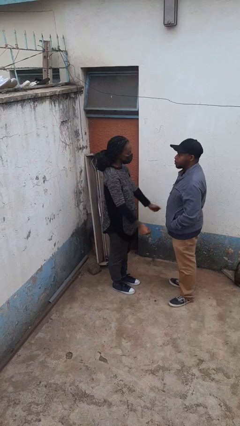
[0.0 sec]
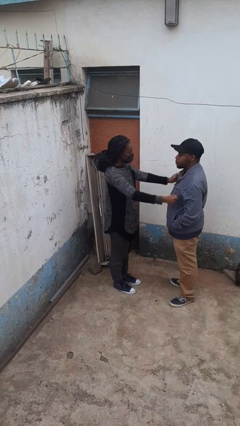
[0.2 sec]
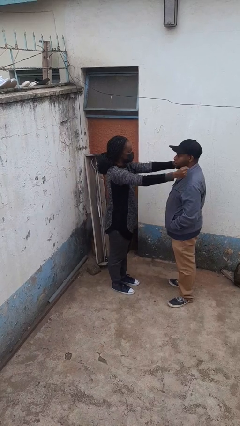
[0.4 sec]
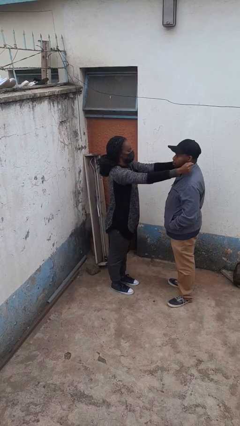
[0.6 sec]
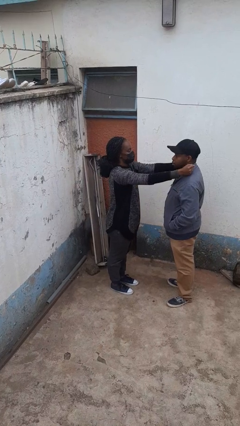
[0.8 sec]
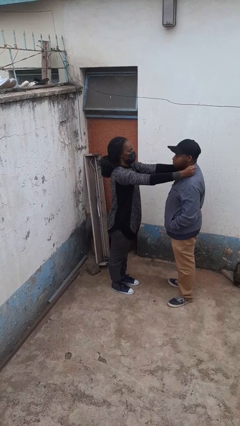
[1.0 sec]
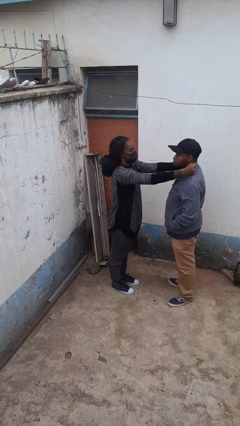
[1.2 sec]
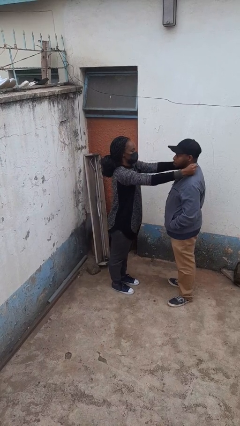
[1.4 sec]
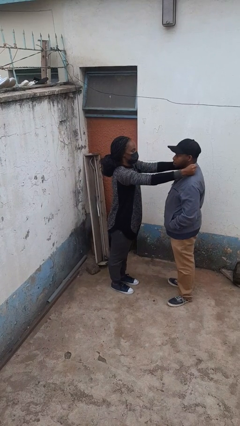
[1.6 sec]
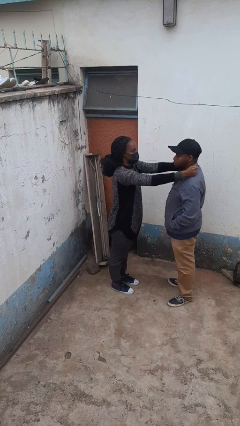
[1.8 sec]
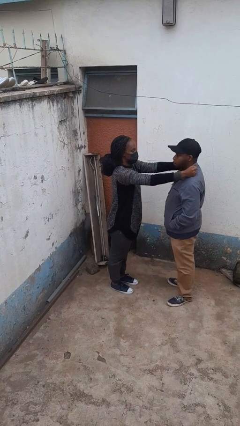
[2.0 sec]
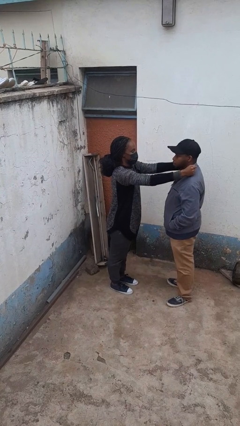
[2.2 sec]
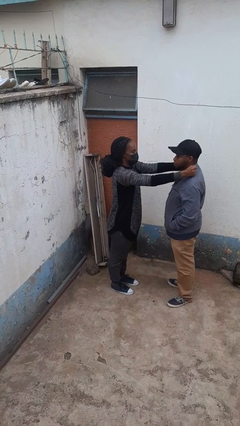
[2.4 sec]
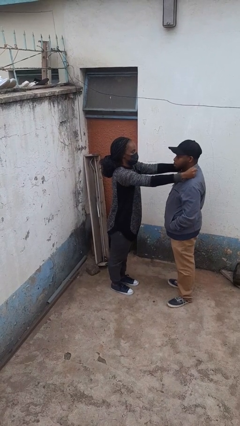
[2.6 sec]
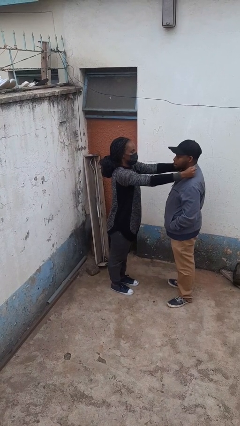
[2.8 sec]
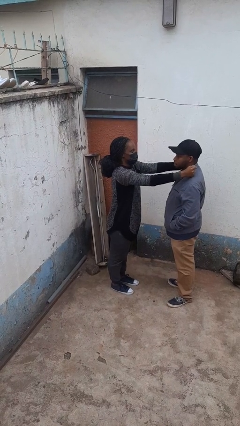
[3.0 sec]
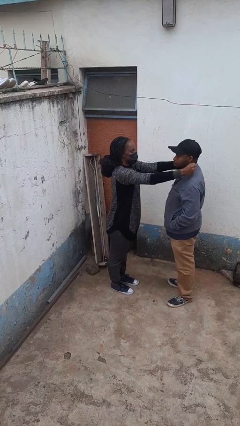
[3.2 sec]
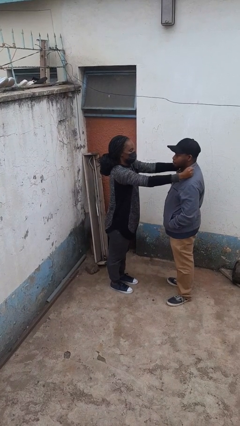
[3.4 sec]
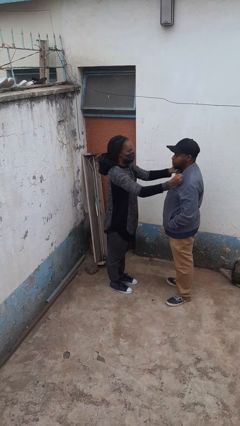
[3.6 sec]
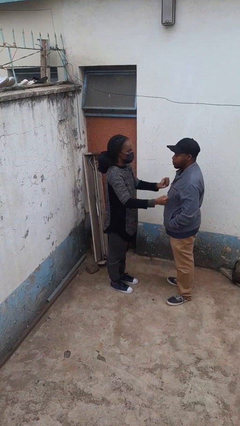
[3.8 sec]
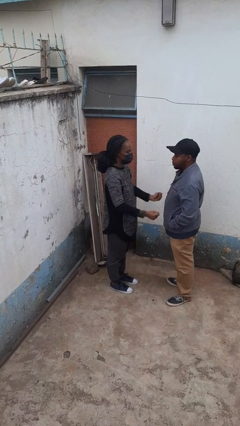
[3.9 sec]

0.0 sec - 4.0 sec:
person pounds shoulders of person

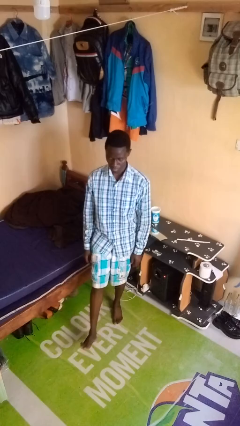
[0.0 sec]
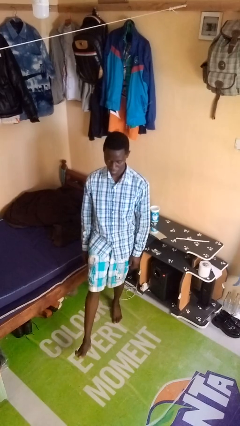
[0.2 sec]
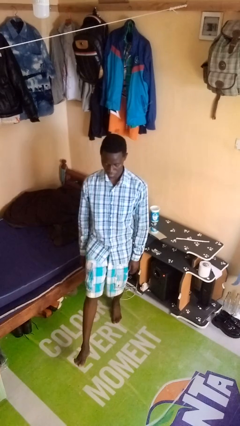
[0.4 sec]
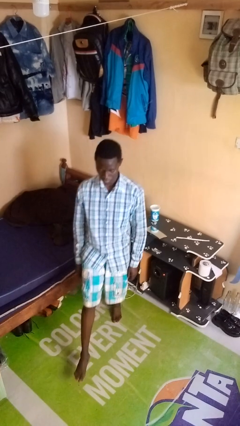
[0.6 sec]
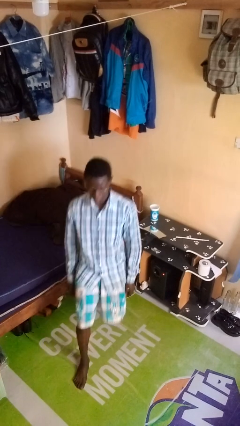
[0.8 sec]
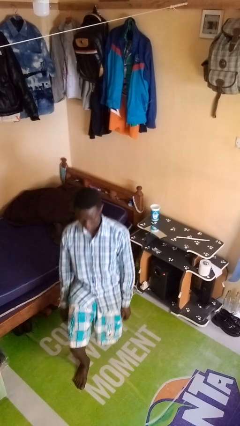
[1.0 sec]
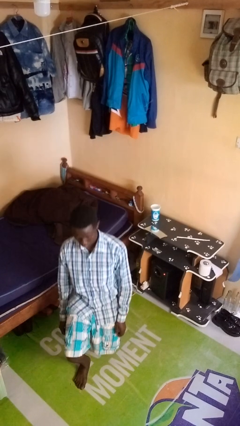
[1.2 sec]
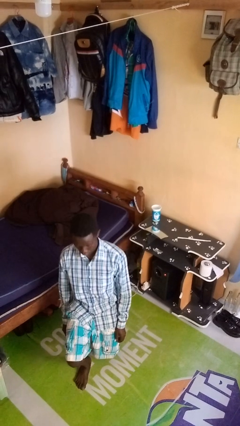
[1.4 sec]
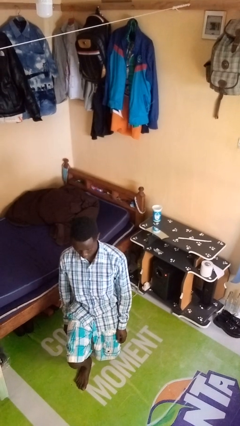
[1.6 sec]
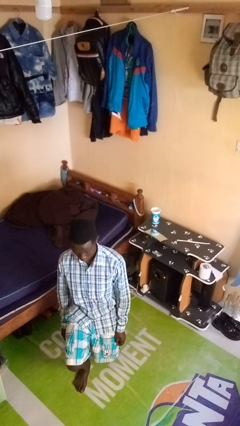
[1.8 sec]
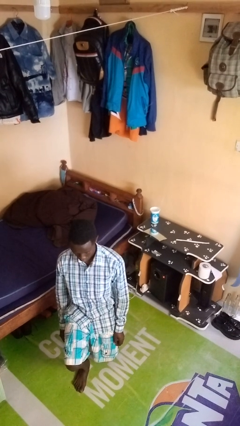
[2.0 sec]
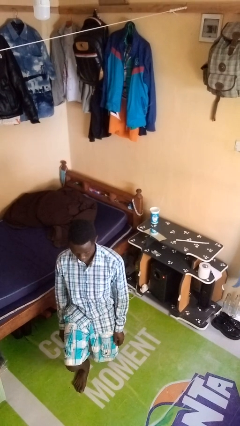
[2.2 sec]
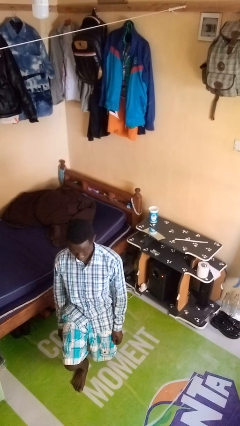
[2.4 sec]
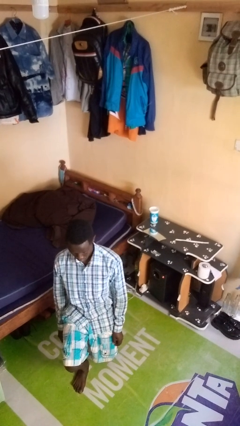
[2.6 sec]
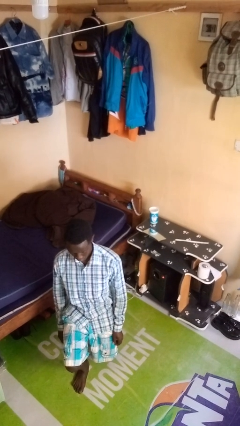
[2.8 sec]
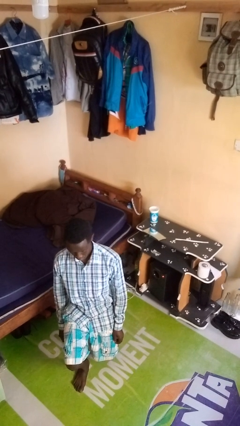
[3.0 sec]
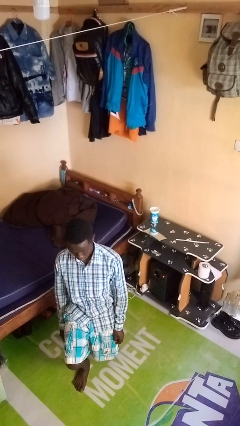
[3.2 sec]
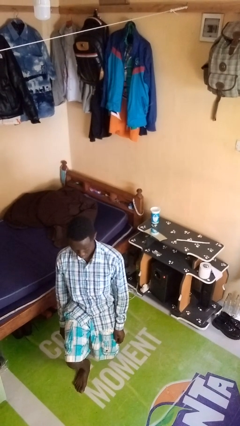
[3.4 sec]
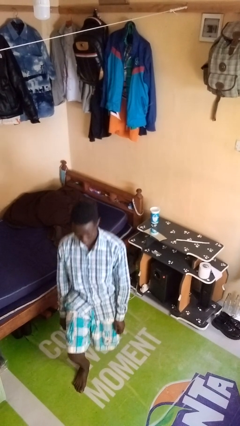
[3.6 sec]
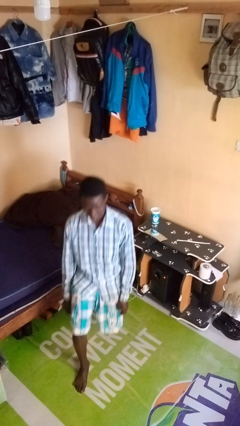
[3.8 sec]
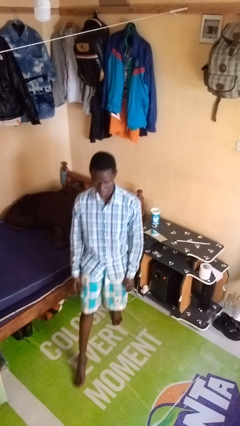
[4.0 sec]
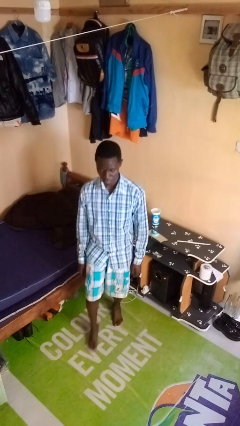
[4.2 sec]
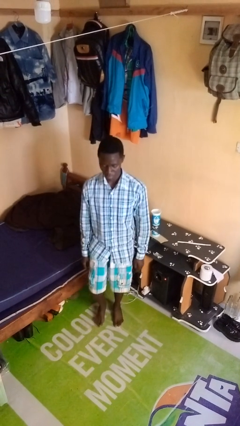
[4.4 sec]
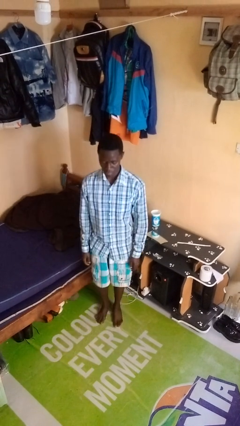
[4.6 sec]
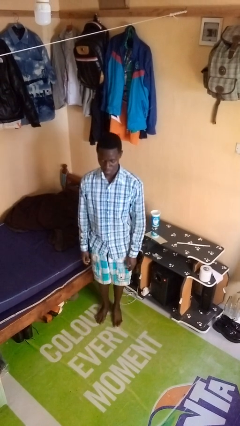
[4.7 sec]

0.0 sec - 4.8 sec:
person exercises with lunges

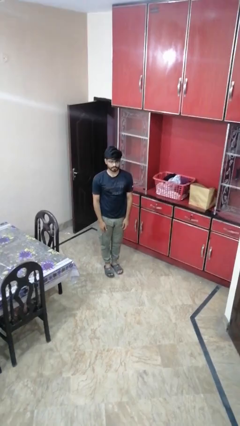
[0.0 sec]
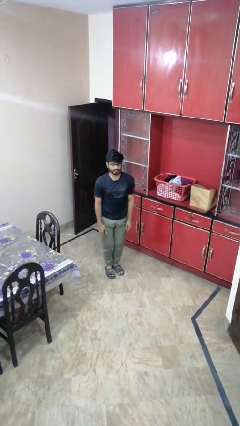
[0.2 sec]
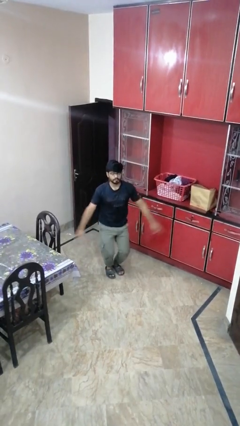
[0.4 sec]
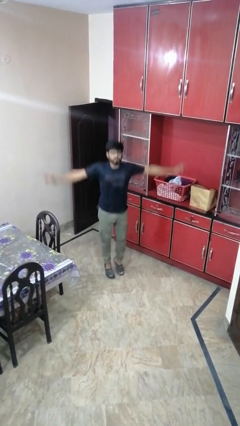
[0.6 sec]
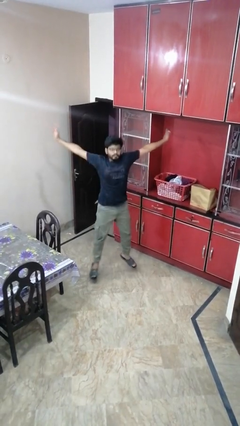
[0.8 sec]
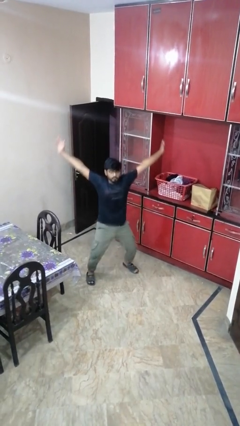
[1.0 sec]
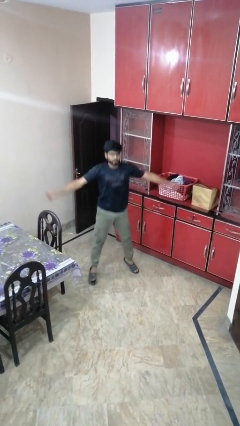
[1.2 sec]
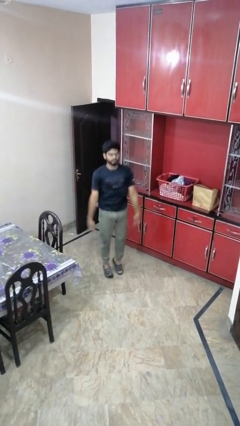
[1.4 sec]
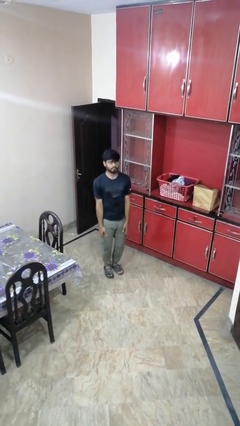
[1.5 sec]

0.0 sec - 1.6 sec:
person exercises with jumping jacks

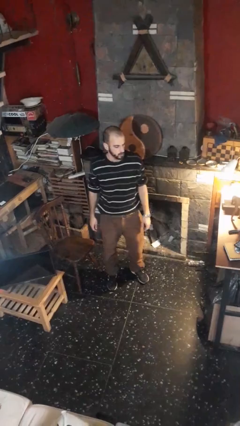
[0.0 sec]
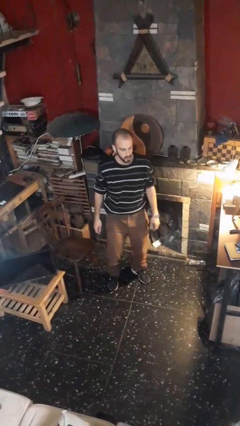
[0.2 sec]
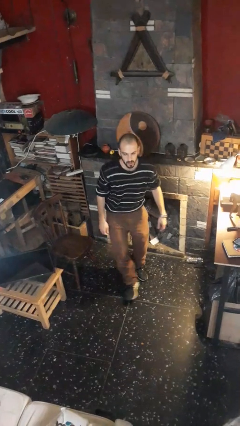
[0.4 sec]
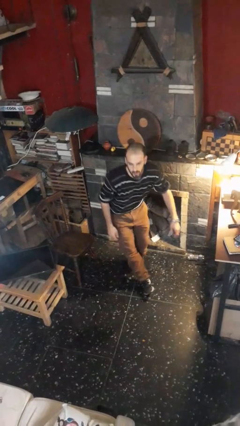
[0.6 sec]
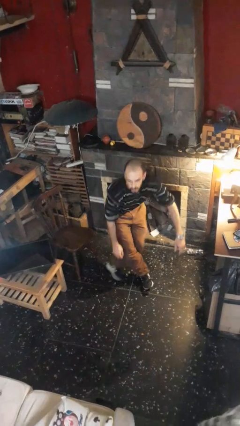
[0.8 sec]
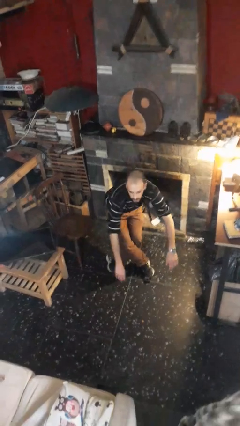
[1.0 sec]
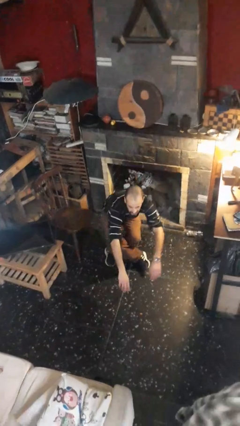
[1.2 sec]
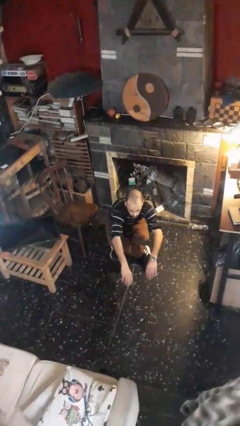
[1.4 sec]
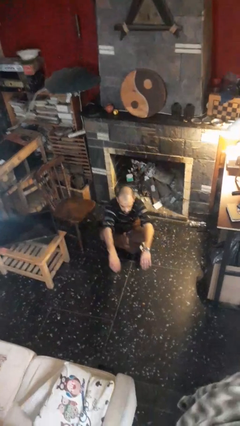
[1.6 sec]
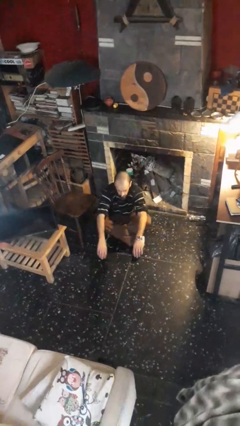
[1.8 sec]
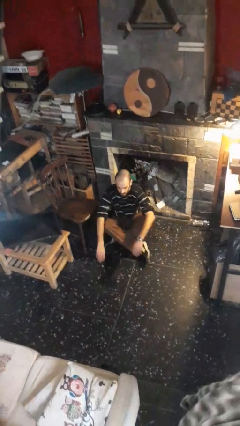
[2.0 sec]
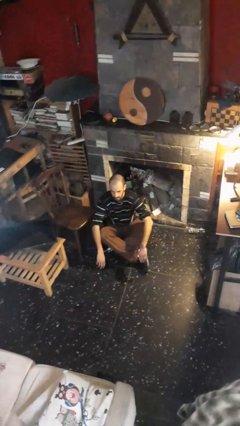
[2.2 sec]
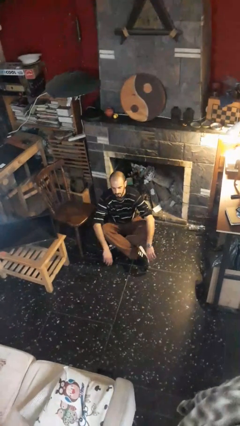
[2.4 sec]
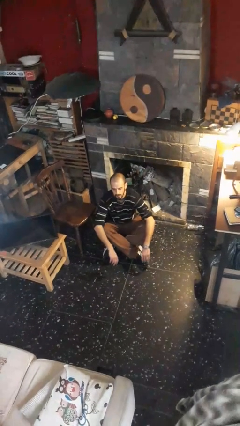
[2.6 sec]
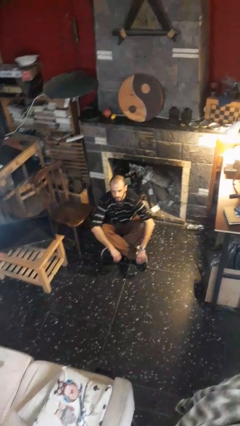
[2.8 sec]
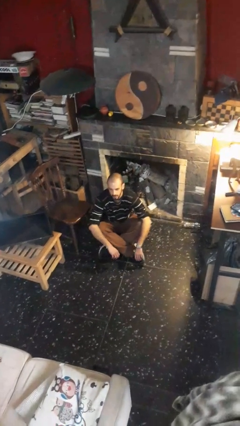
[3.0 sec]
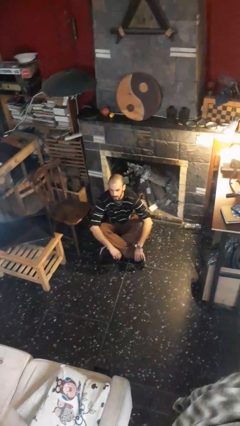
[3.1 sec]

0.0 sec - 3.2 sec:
person sits crisscross

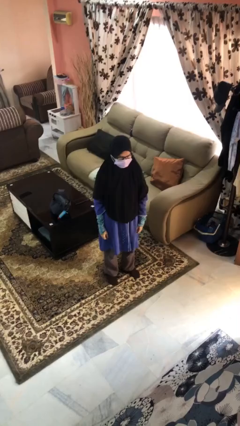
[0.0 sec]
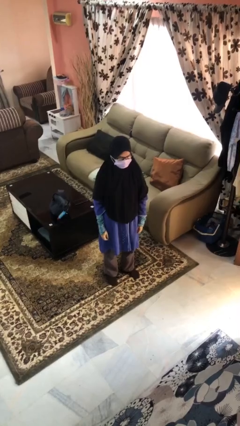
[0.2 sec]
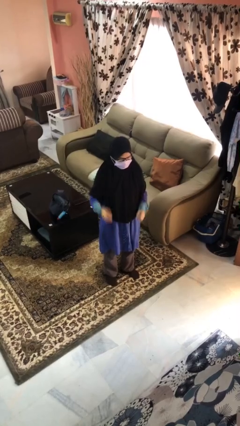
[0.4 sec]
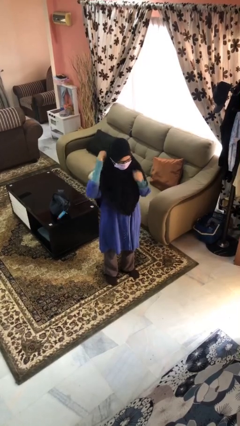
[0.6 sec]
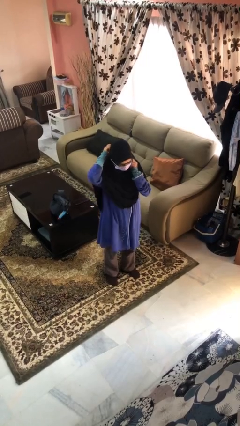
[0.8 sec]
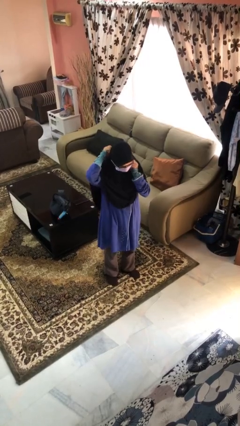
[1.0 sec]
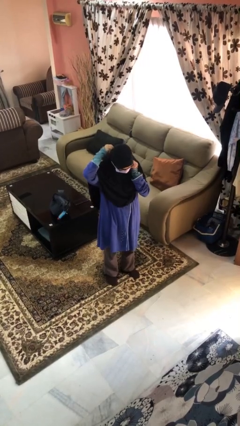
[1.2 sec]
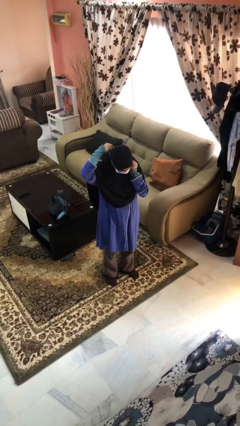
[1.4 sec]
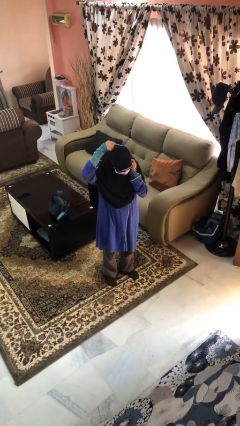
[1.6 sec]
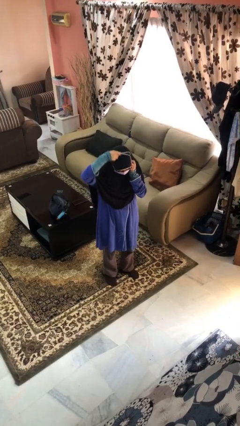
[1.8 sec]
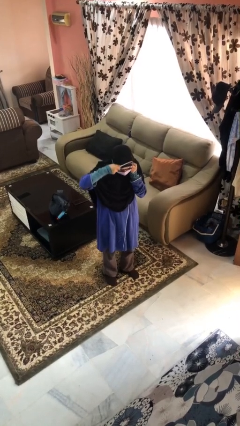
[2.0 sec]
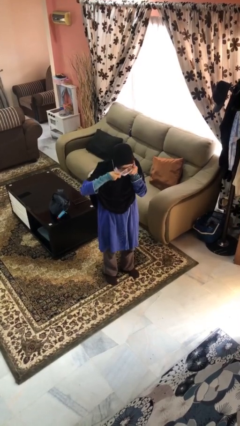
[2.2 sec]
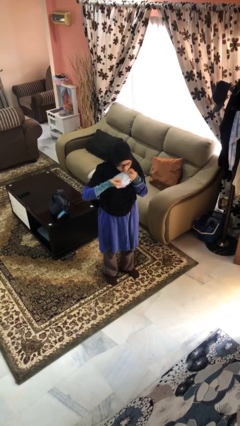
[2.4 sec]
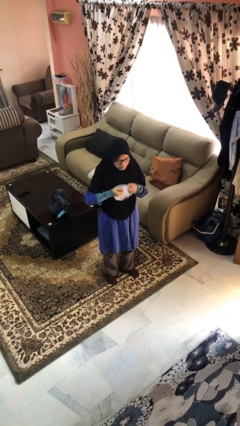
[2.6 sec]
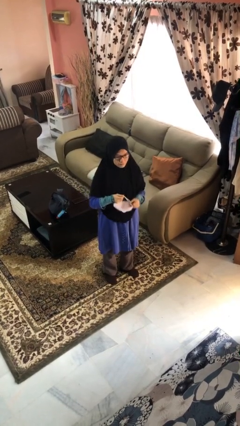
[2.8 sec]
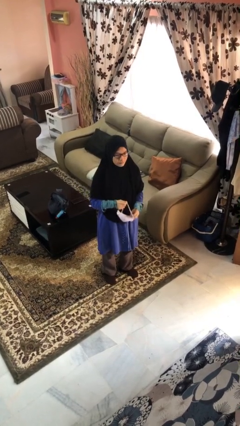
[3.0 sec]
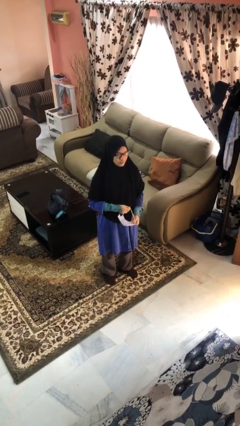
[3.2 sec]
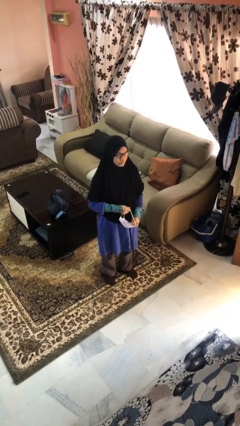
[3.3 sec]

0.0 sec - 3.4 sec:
person takes off facemask

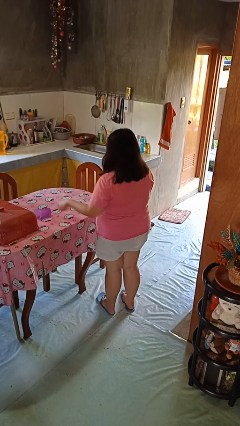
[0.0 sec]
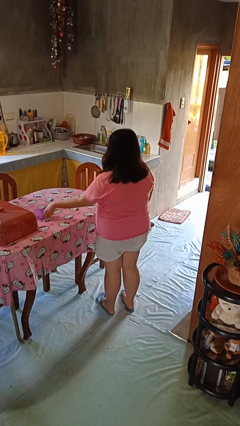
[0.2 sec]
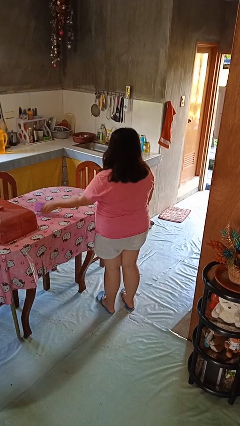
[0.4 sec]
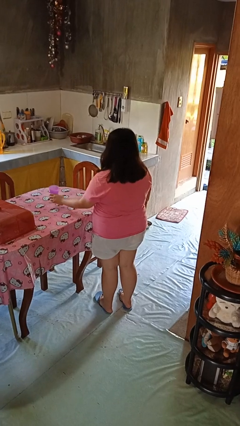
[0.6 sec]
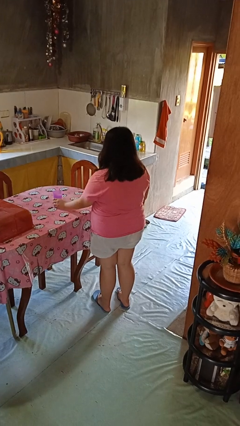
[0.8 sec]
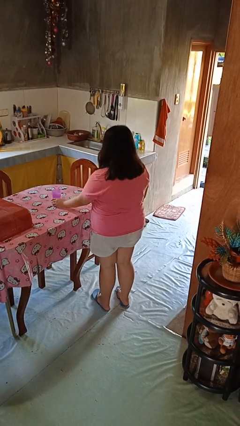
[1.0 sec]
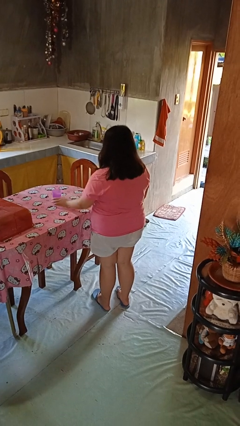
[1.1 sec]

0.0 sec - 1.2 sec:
person sets upright glass
